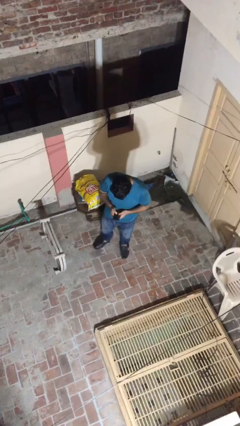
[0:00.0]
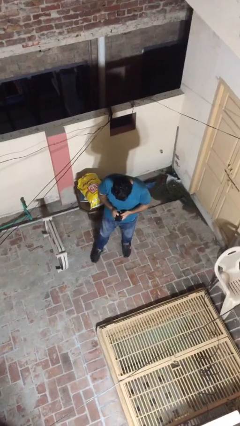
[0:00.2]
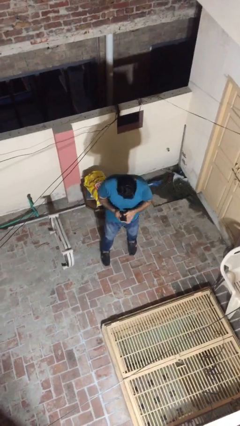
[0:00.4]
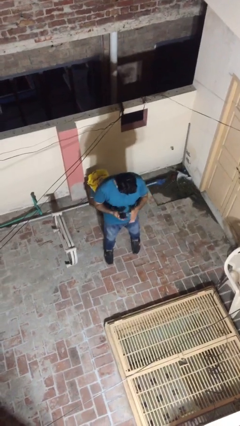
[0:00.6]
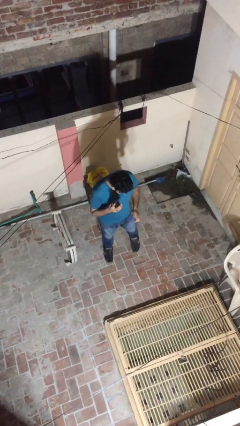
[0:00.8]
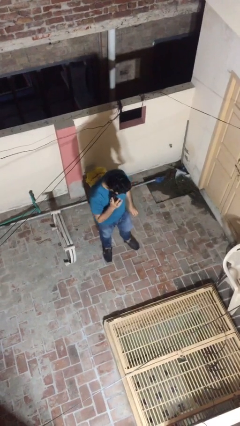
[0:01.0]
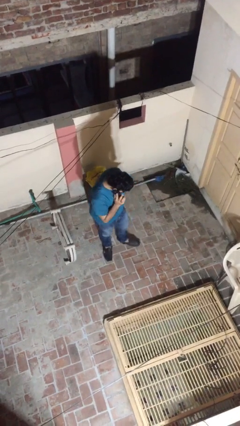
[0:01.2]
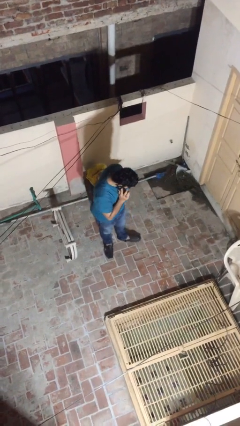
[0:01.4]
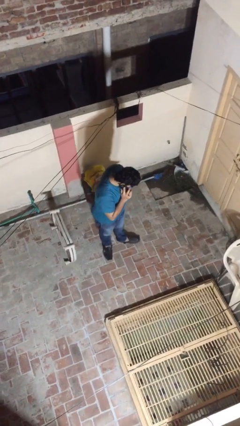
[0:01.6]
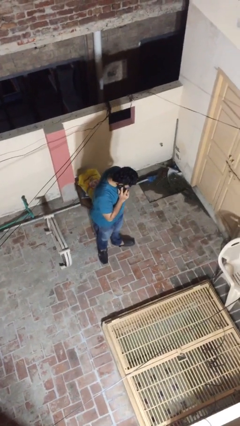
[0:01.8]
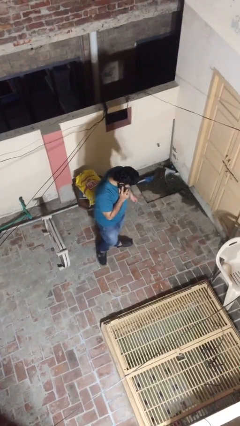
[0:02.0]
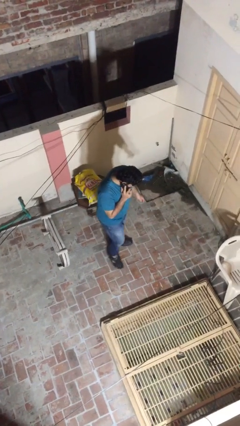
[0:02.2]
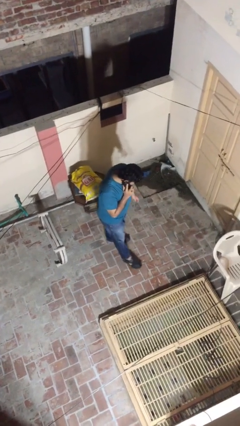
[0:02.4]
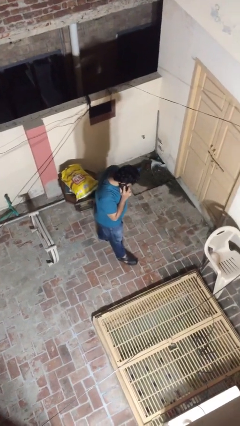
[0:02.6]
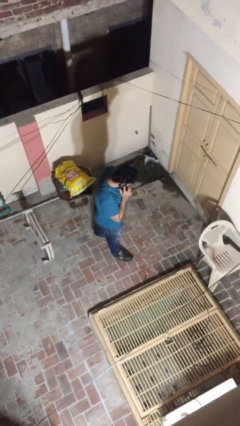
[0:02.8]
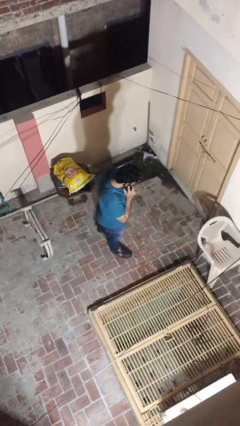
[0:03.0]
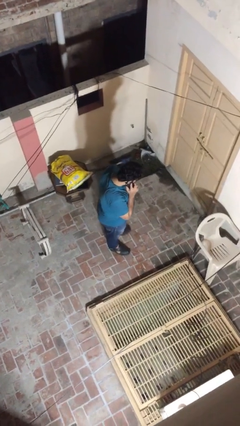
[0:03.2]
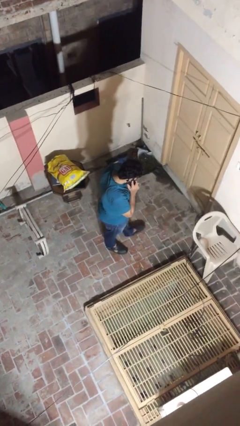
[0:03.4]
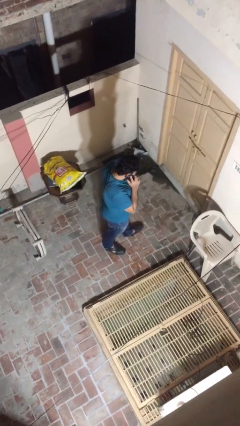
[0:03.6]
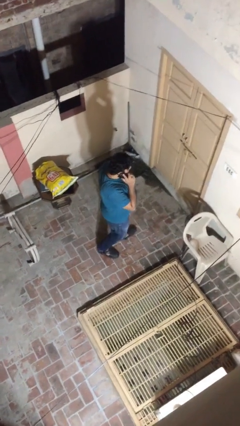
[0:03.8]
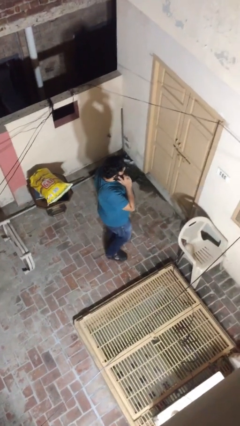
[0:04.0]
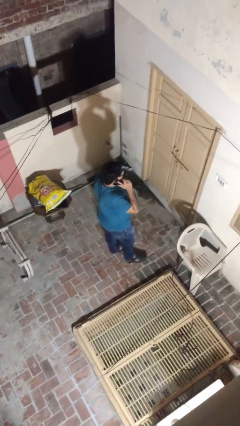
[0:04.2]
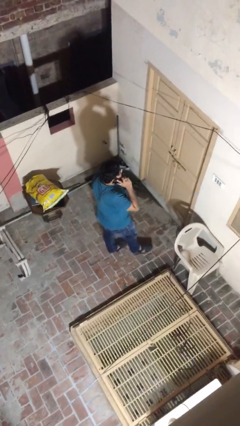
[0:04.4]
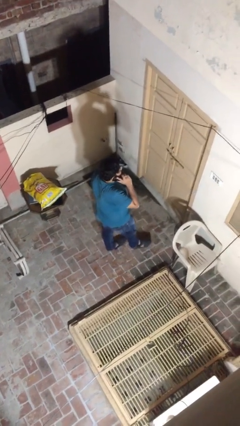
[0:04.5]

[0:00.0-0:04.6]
person talks on phone

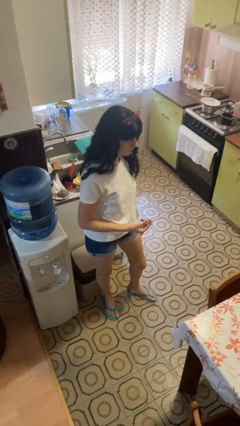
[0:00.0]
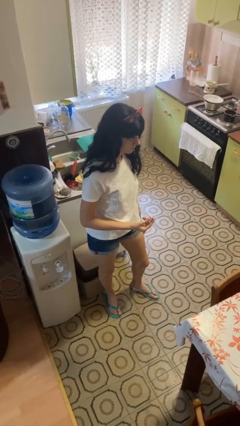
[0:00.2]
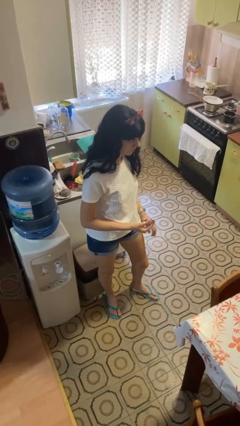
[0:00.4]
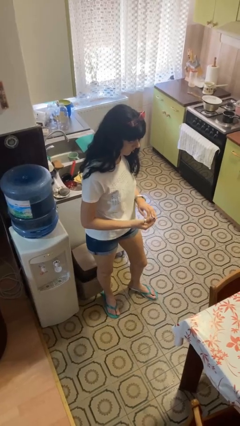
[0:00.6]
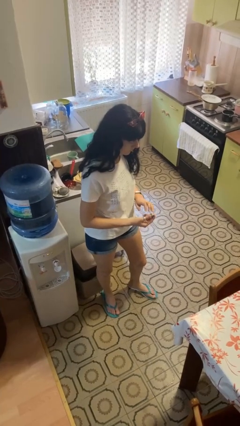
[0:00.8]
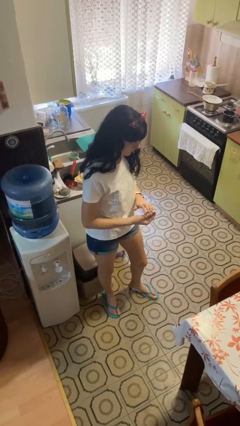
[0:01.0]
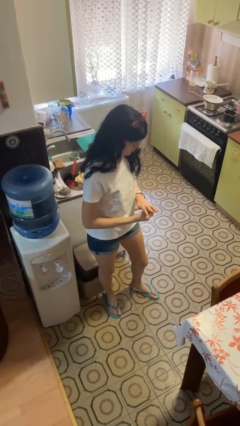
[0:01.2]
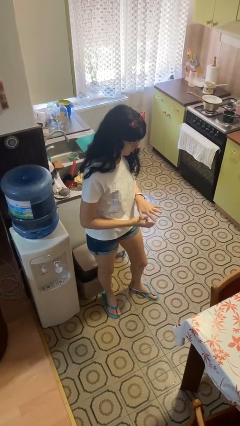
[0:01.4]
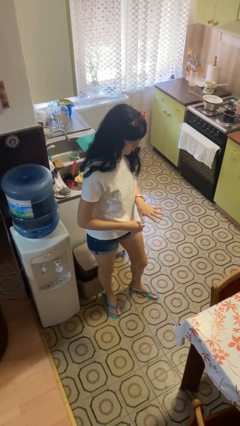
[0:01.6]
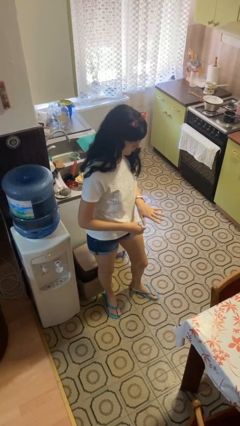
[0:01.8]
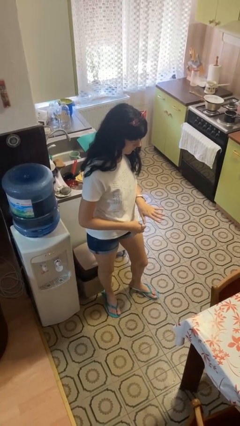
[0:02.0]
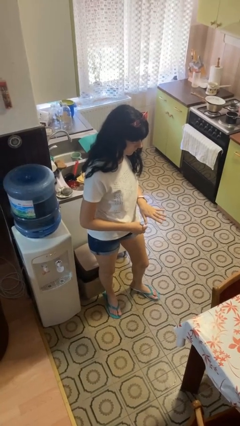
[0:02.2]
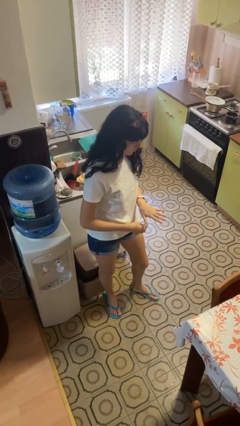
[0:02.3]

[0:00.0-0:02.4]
person puts on ring

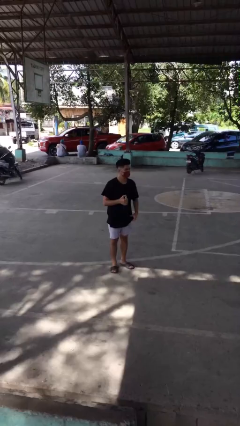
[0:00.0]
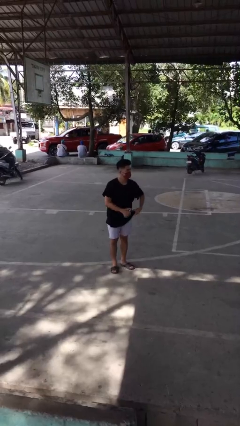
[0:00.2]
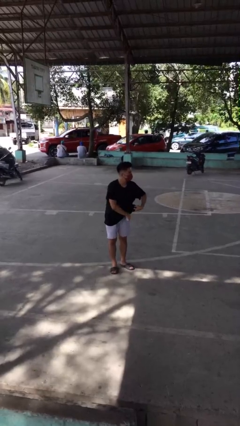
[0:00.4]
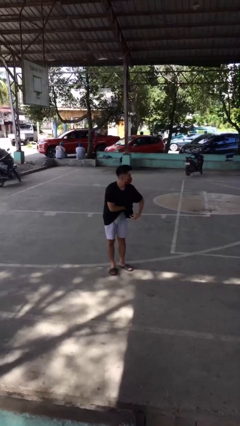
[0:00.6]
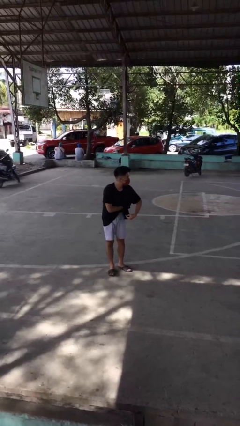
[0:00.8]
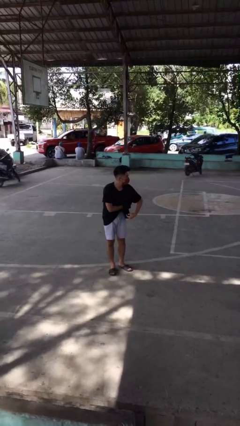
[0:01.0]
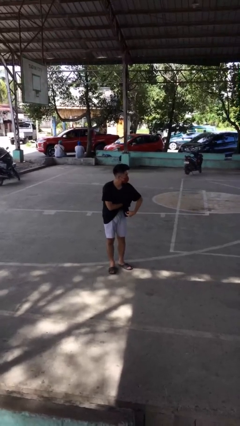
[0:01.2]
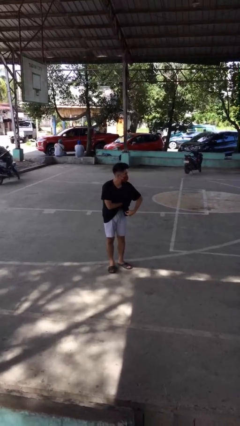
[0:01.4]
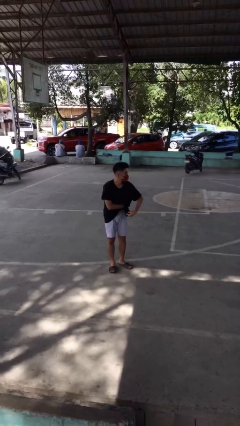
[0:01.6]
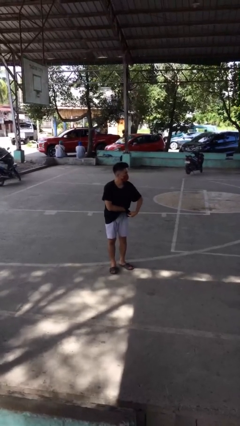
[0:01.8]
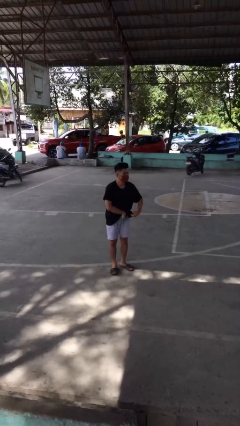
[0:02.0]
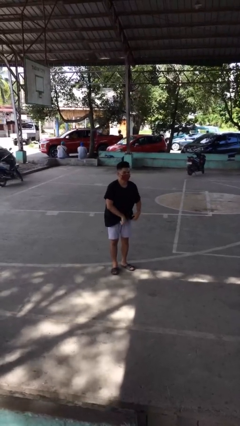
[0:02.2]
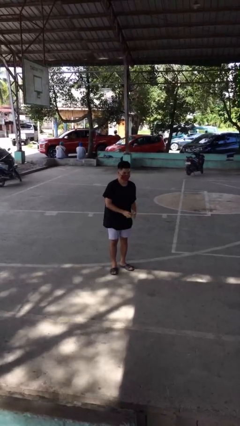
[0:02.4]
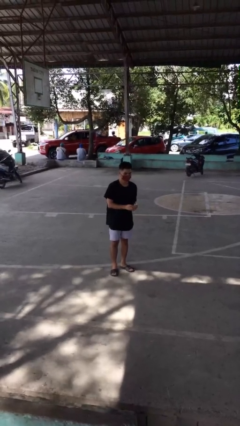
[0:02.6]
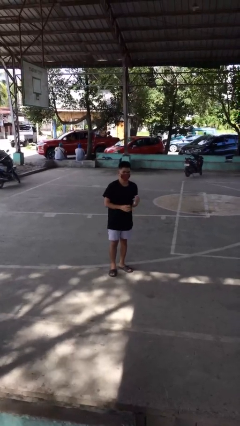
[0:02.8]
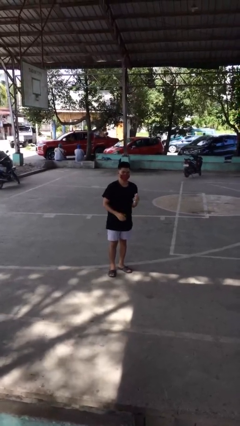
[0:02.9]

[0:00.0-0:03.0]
person applies deodorant

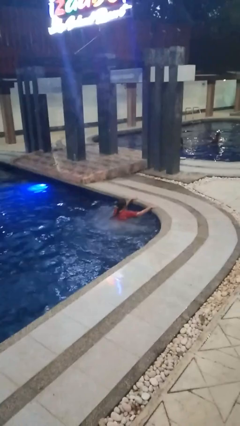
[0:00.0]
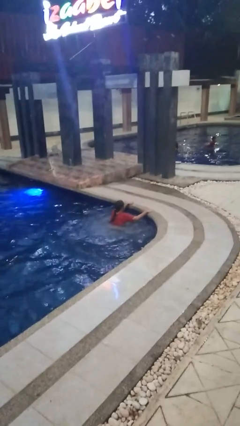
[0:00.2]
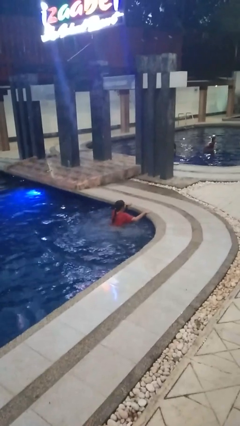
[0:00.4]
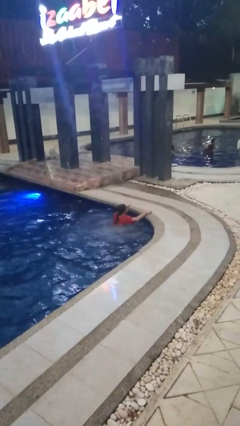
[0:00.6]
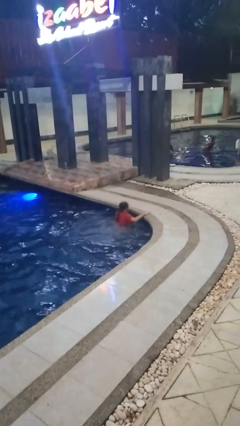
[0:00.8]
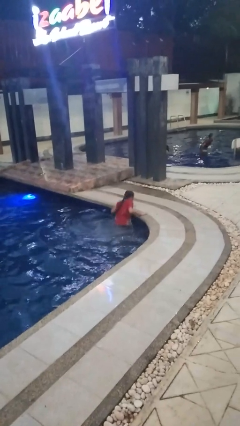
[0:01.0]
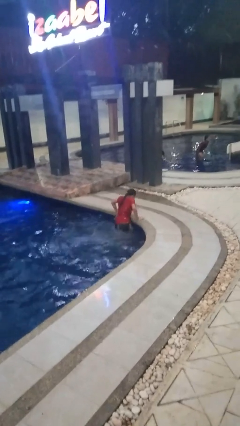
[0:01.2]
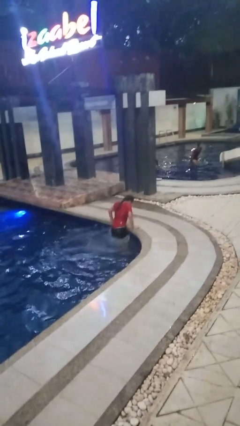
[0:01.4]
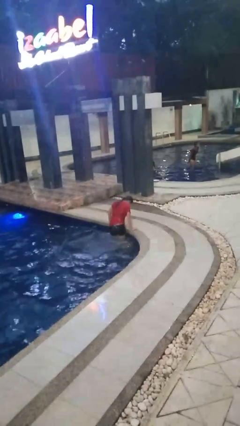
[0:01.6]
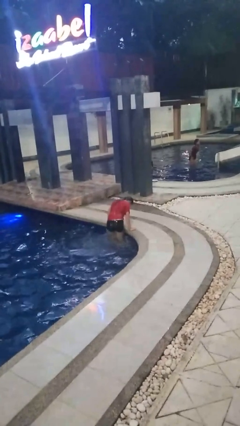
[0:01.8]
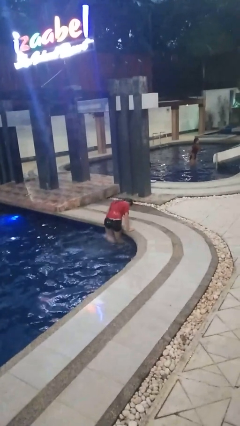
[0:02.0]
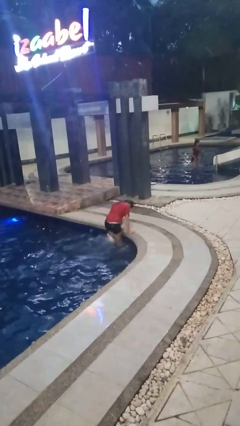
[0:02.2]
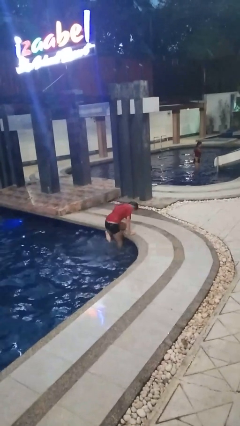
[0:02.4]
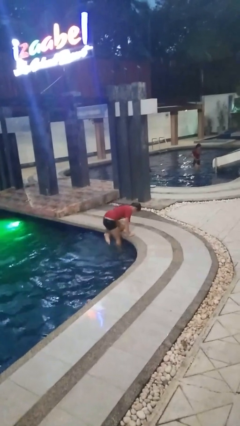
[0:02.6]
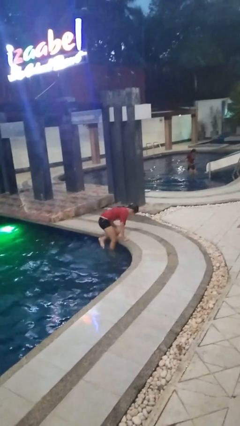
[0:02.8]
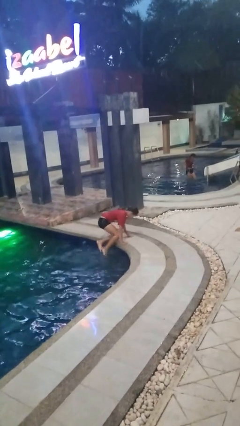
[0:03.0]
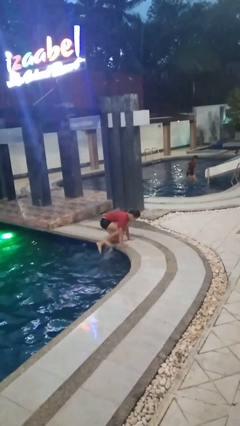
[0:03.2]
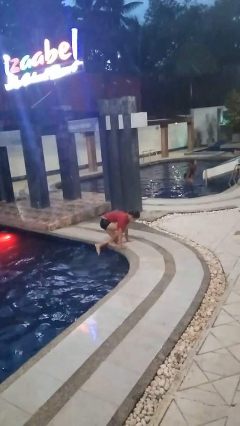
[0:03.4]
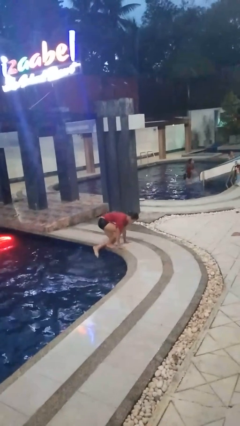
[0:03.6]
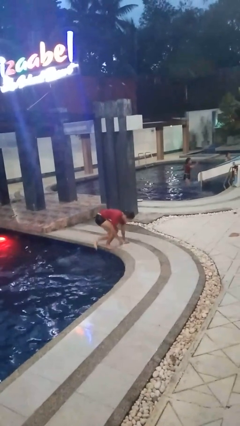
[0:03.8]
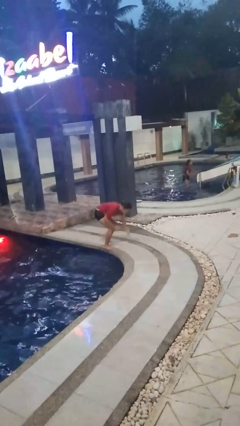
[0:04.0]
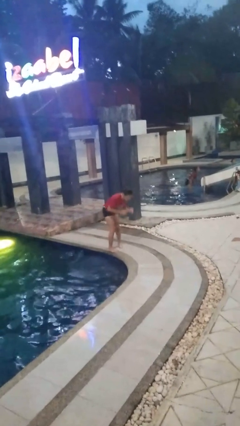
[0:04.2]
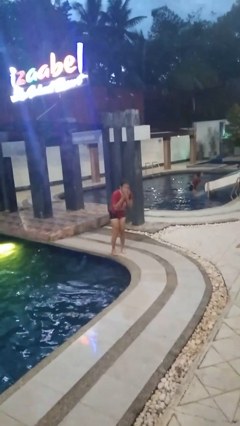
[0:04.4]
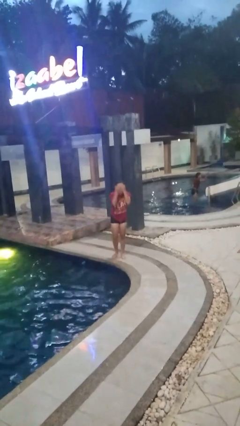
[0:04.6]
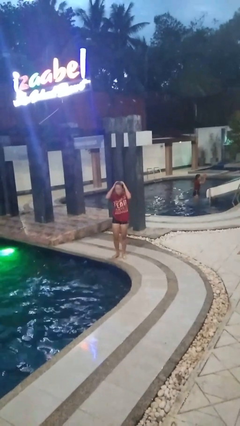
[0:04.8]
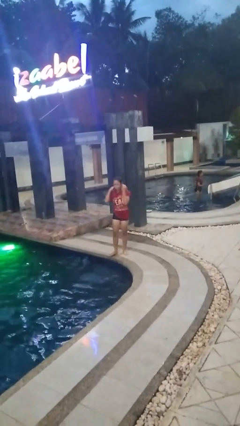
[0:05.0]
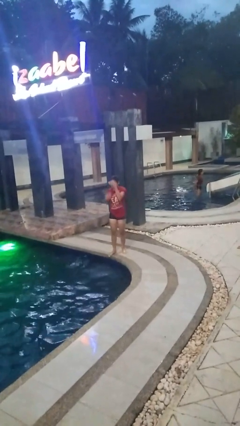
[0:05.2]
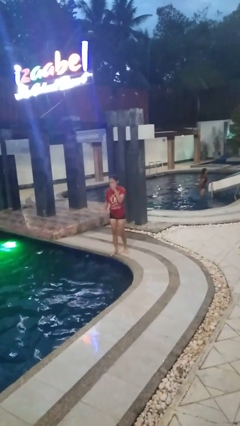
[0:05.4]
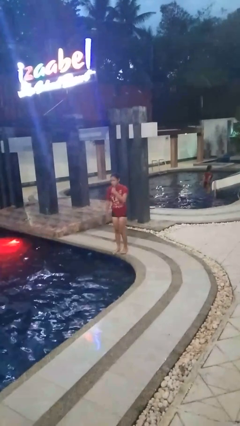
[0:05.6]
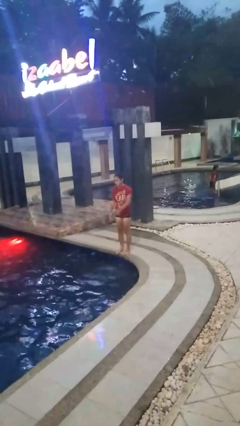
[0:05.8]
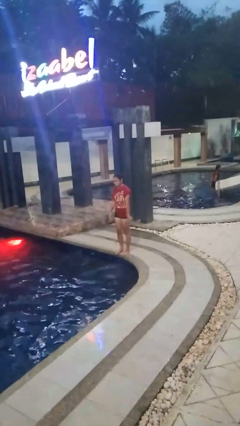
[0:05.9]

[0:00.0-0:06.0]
person exits pool

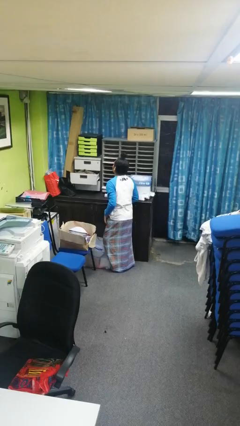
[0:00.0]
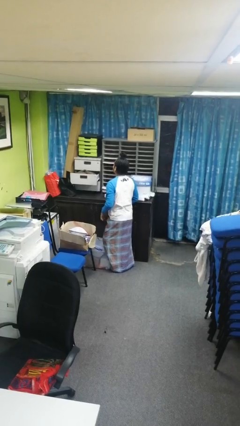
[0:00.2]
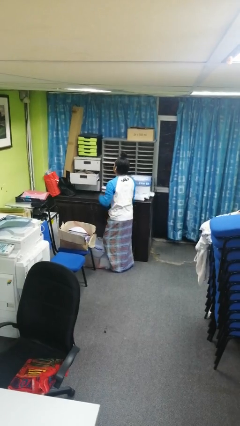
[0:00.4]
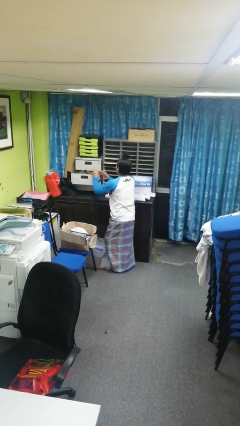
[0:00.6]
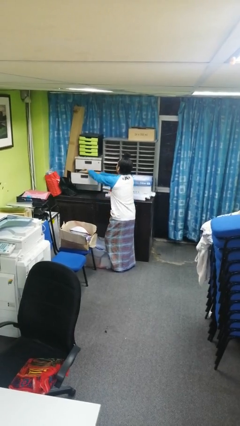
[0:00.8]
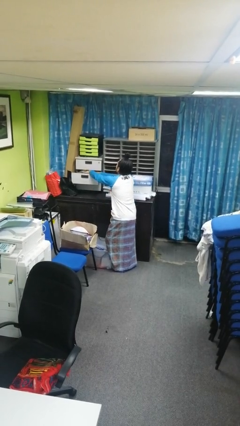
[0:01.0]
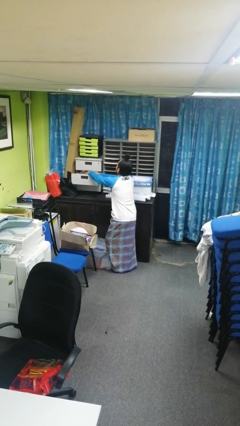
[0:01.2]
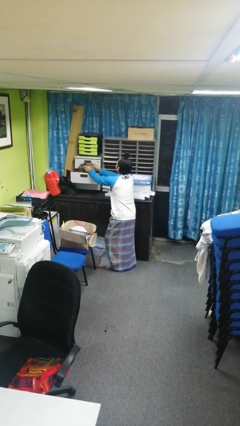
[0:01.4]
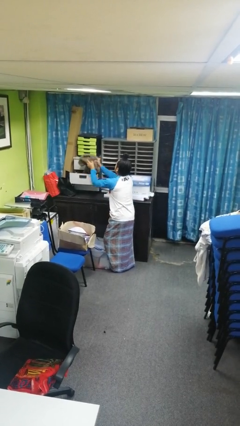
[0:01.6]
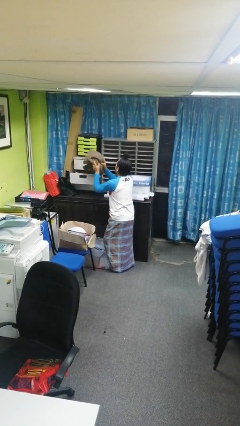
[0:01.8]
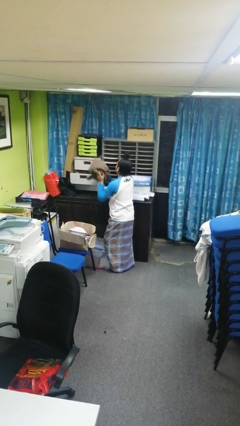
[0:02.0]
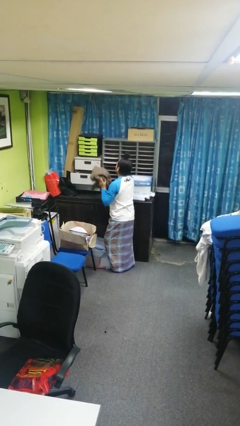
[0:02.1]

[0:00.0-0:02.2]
person takes clothes from dresser
